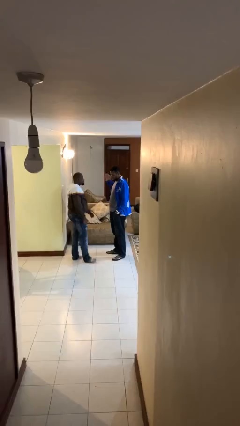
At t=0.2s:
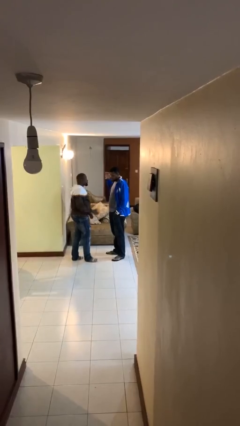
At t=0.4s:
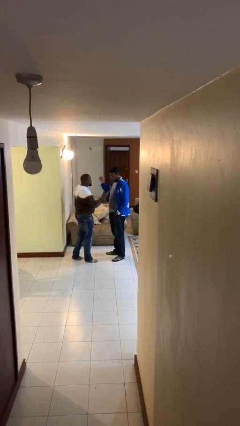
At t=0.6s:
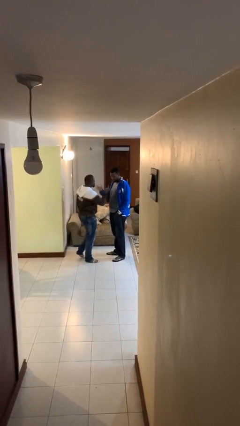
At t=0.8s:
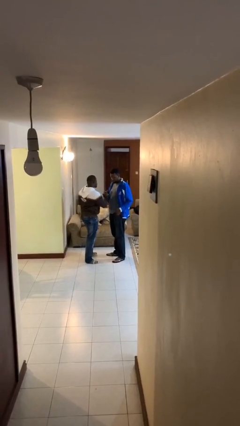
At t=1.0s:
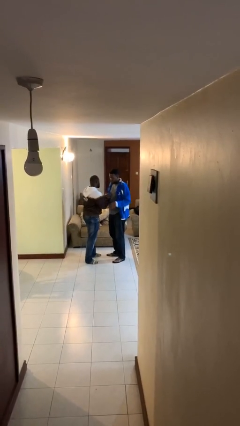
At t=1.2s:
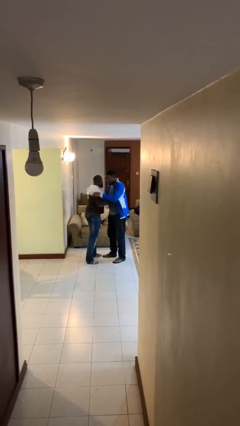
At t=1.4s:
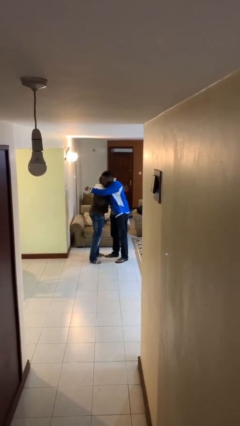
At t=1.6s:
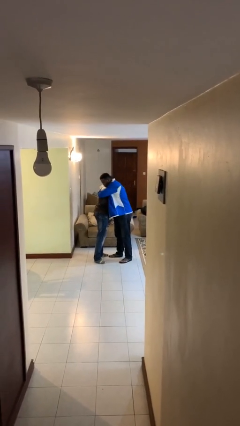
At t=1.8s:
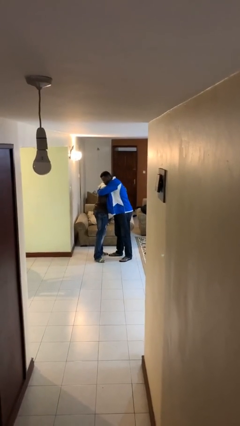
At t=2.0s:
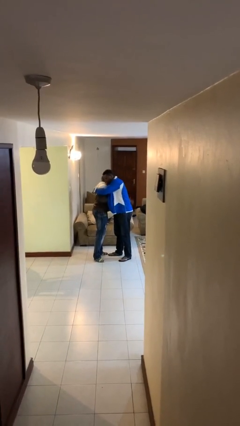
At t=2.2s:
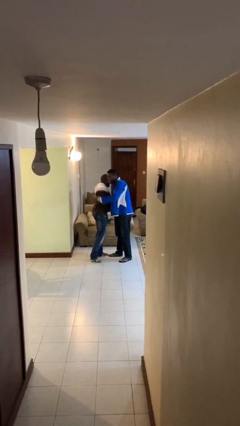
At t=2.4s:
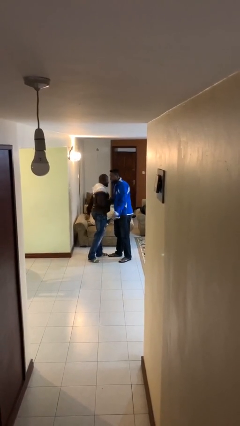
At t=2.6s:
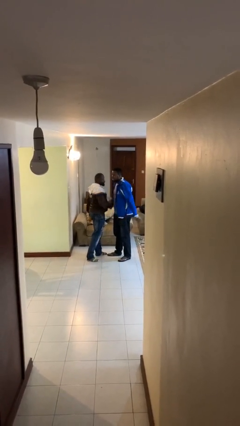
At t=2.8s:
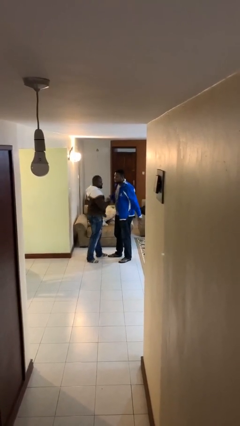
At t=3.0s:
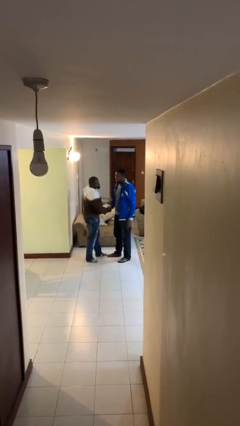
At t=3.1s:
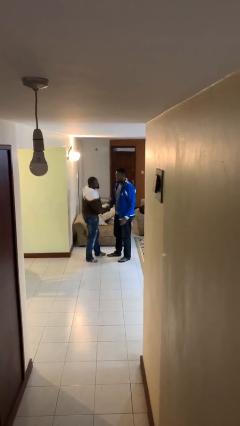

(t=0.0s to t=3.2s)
person embraces person

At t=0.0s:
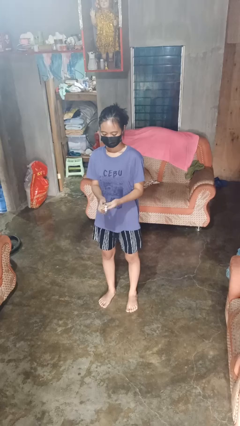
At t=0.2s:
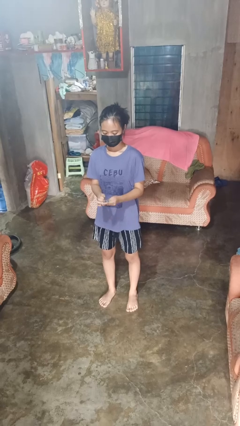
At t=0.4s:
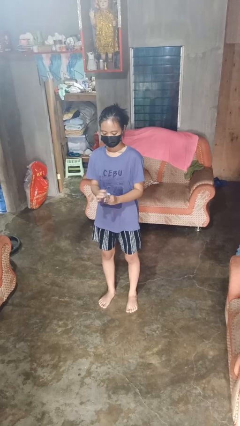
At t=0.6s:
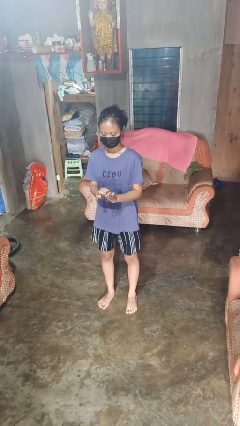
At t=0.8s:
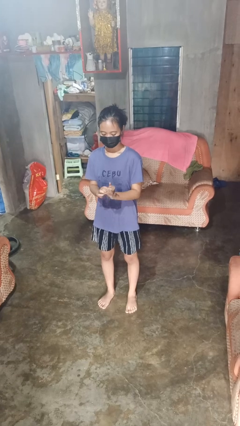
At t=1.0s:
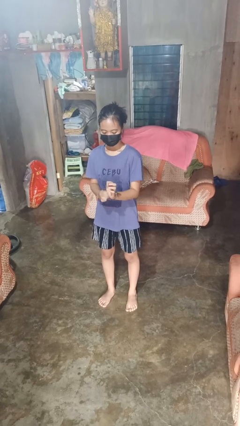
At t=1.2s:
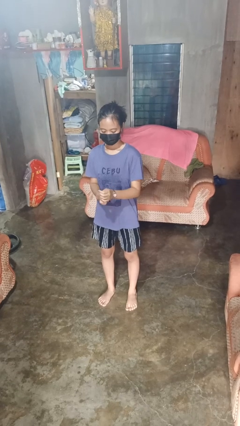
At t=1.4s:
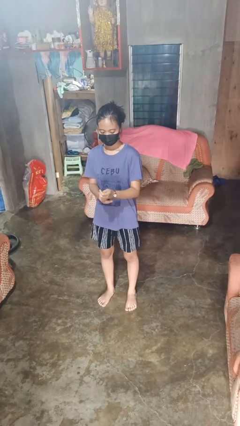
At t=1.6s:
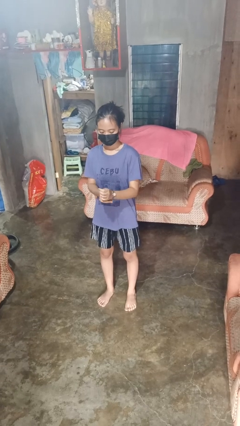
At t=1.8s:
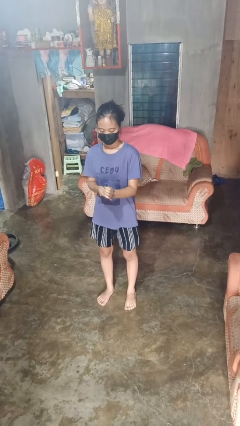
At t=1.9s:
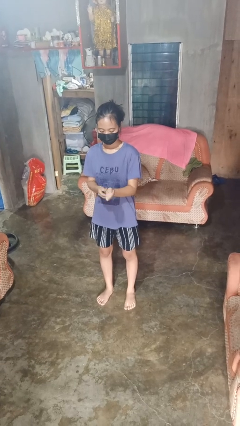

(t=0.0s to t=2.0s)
person puts on wristwatch

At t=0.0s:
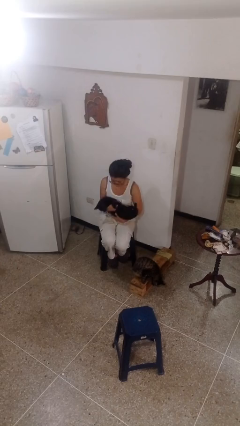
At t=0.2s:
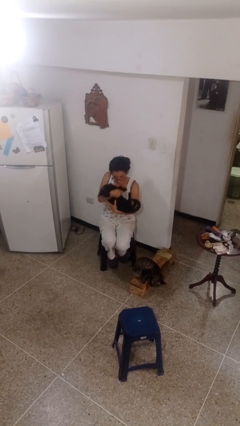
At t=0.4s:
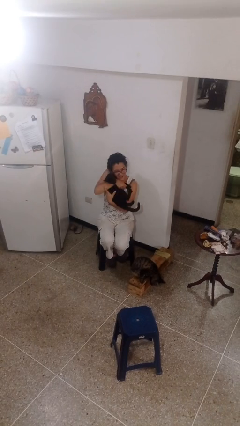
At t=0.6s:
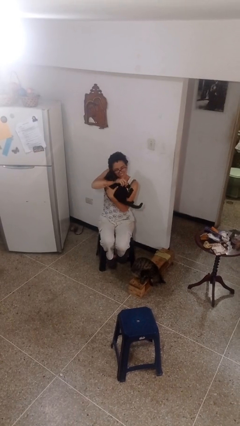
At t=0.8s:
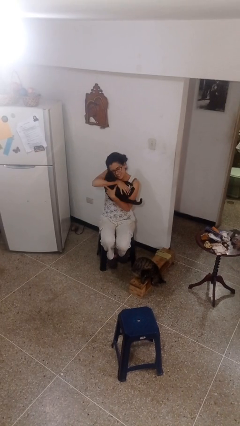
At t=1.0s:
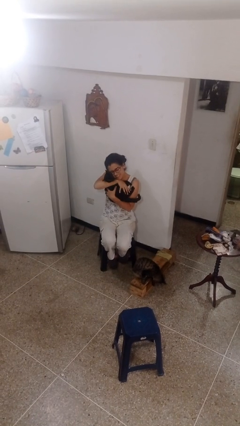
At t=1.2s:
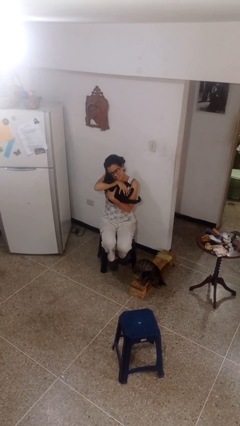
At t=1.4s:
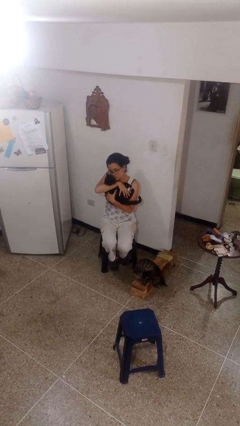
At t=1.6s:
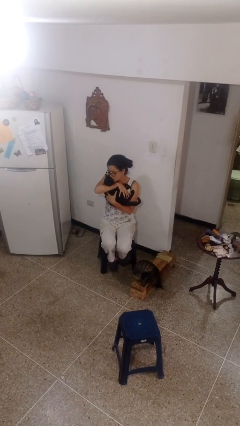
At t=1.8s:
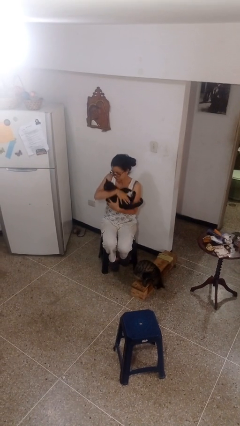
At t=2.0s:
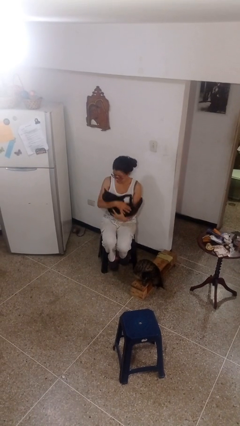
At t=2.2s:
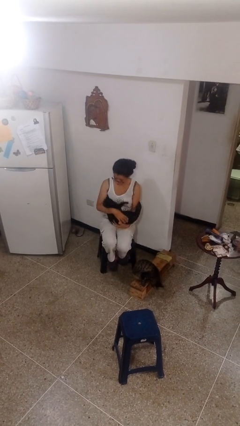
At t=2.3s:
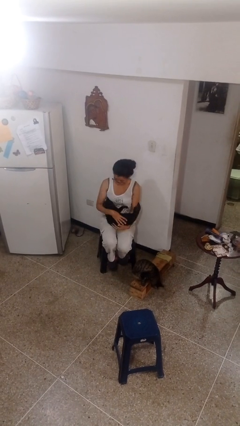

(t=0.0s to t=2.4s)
person hugs cat

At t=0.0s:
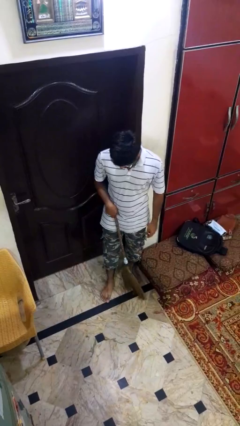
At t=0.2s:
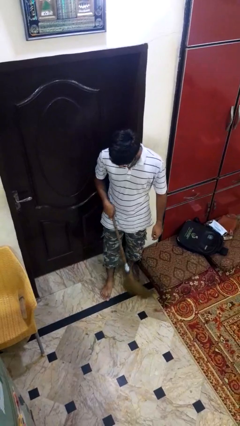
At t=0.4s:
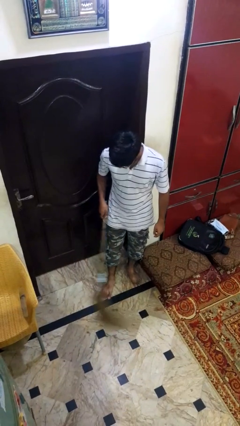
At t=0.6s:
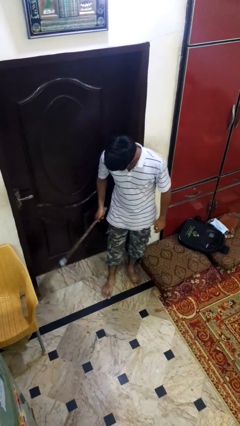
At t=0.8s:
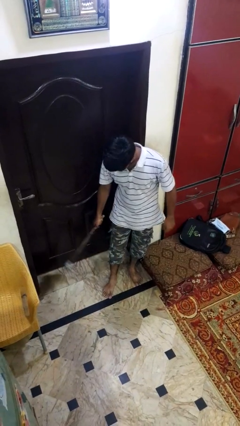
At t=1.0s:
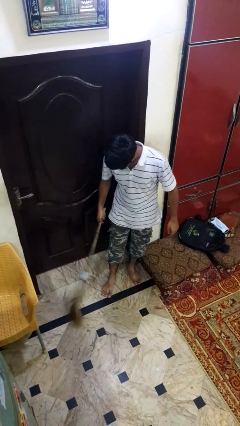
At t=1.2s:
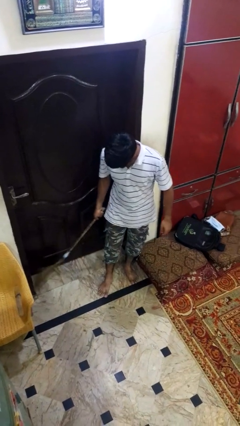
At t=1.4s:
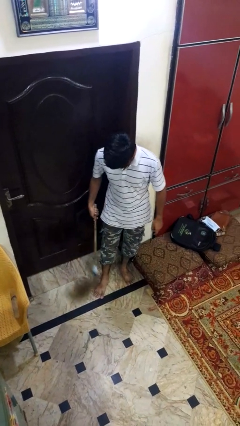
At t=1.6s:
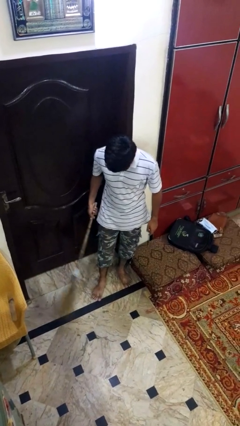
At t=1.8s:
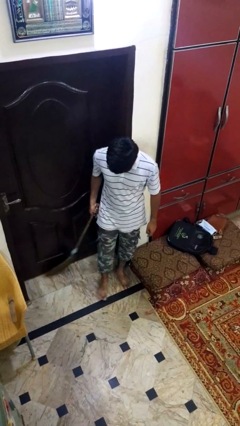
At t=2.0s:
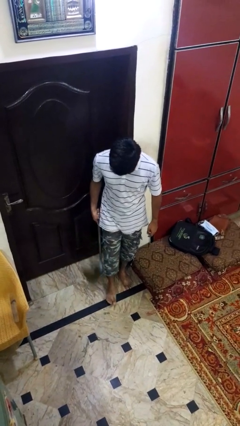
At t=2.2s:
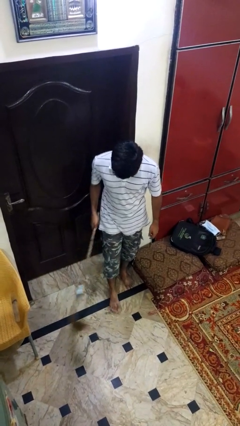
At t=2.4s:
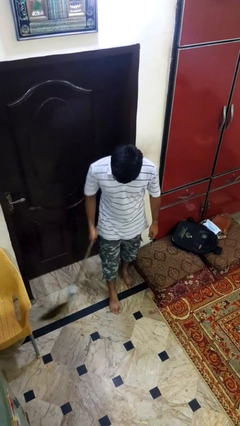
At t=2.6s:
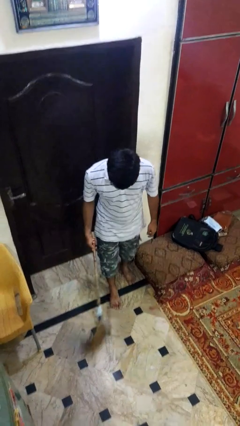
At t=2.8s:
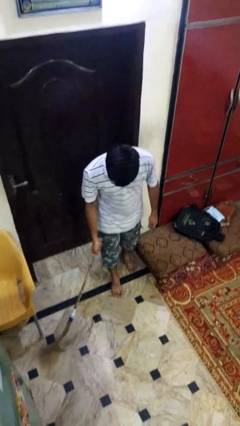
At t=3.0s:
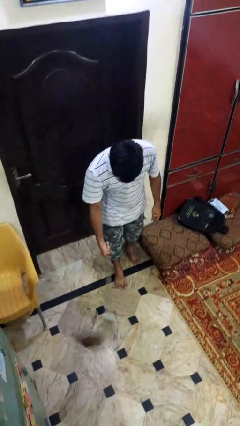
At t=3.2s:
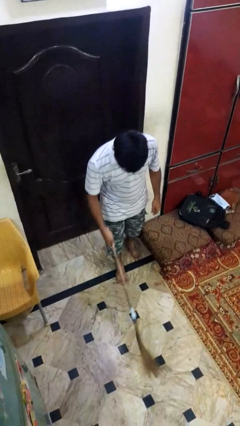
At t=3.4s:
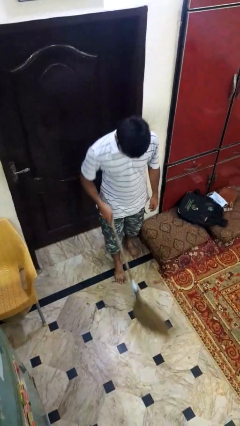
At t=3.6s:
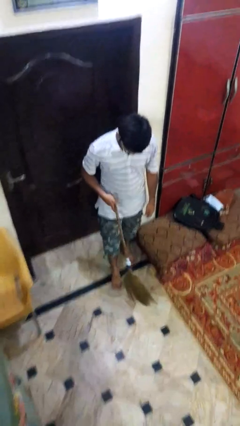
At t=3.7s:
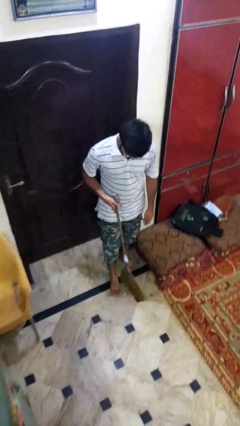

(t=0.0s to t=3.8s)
person sweeps floor

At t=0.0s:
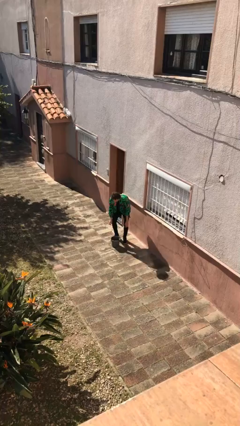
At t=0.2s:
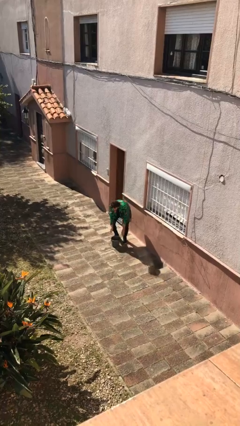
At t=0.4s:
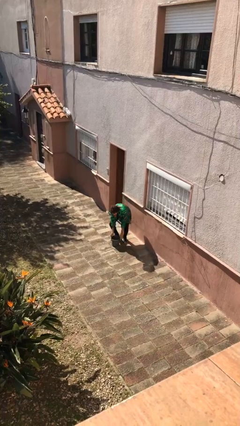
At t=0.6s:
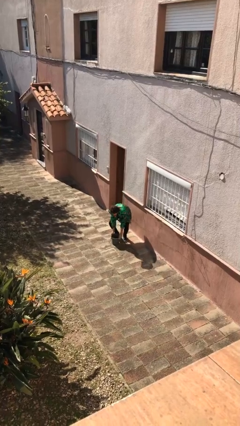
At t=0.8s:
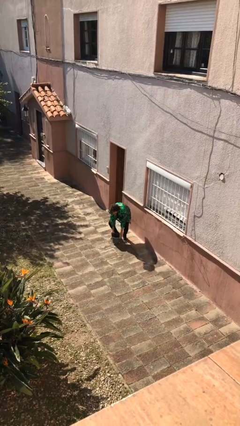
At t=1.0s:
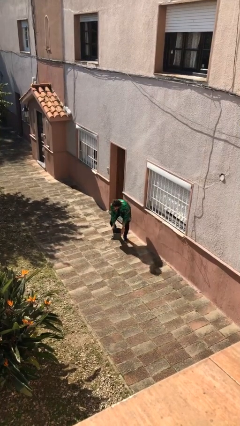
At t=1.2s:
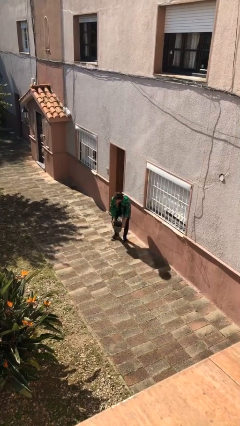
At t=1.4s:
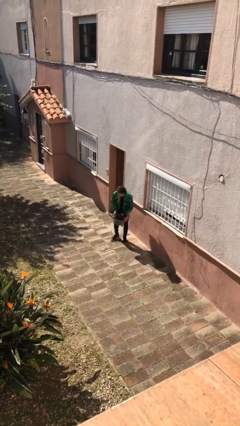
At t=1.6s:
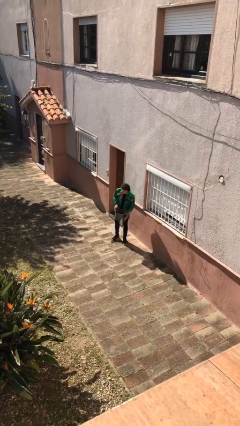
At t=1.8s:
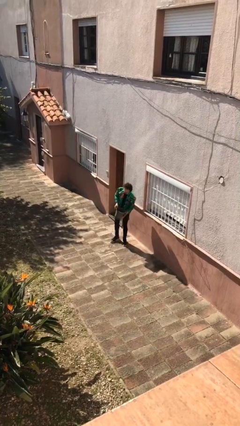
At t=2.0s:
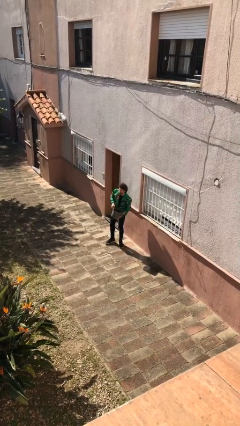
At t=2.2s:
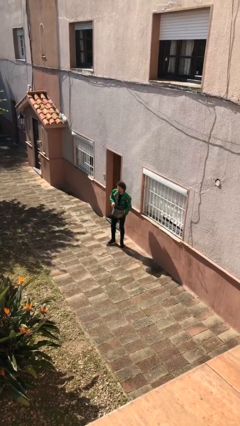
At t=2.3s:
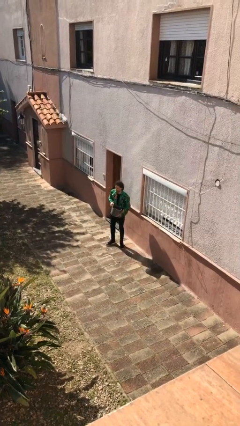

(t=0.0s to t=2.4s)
person picks up object from floor

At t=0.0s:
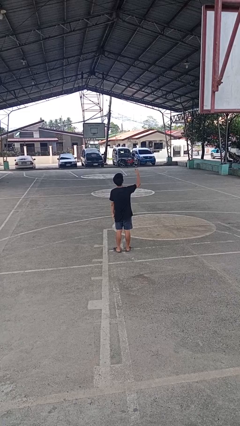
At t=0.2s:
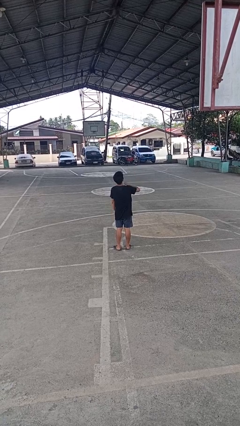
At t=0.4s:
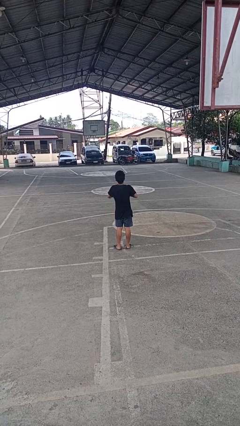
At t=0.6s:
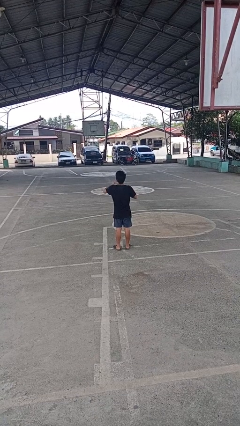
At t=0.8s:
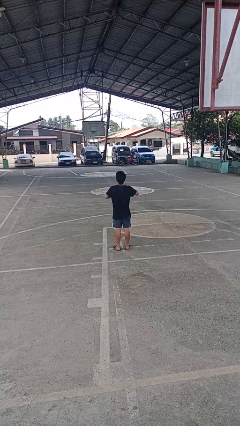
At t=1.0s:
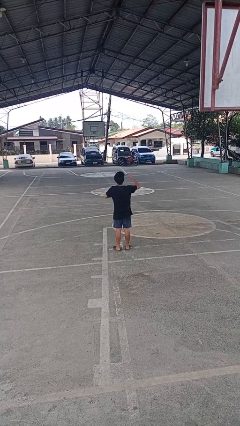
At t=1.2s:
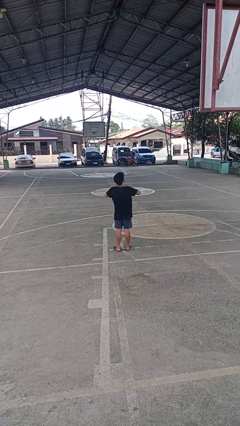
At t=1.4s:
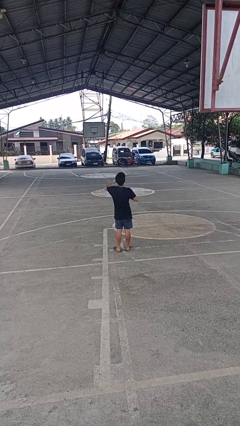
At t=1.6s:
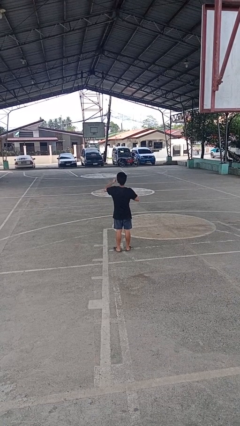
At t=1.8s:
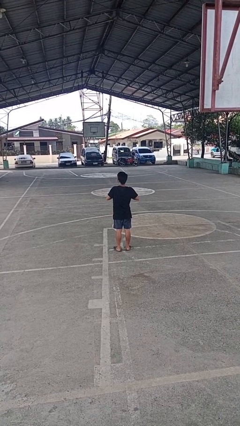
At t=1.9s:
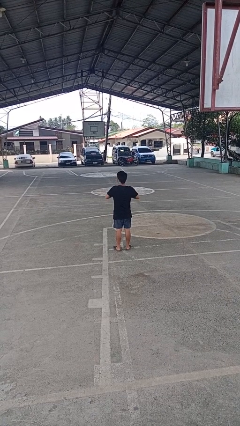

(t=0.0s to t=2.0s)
person drums on chest

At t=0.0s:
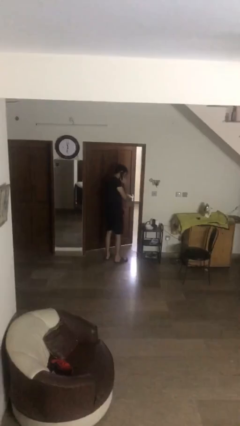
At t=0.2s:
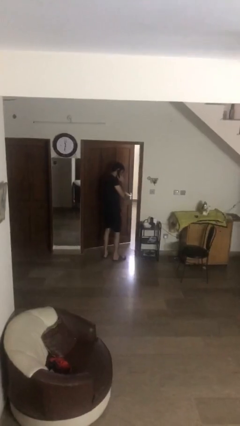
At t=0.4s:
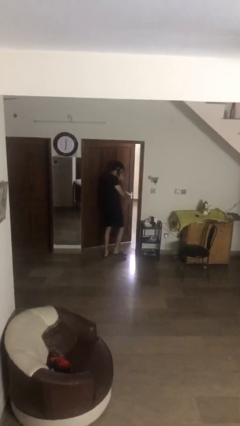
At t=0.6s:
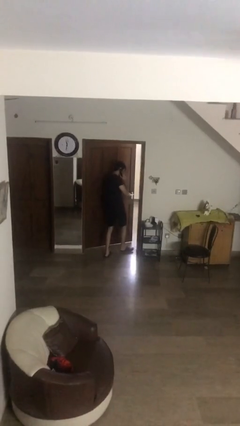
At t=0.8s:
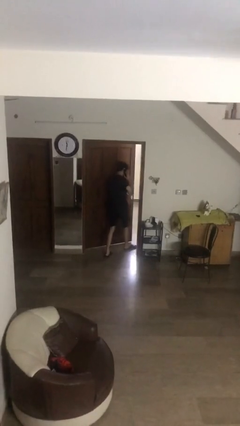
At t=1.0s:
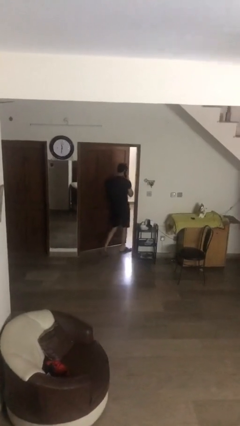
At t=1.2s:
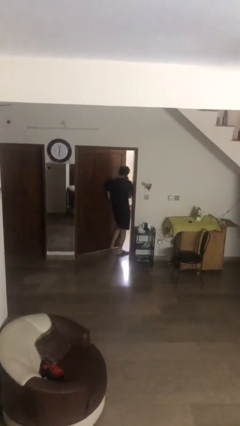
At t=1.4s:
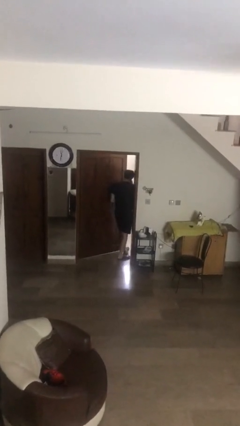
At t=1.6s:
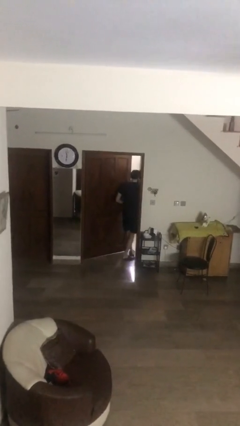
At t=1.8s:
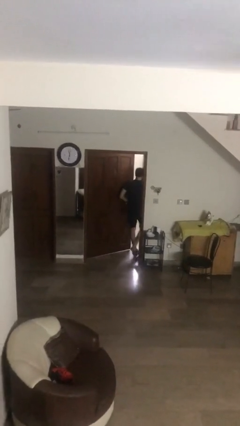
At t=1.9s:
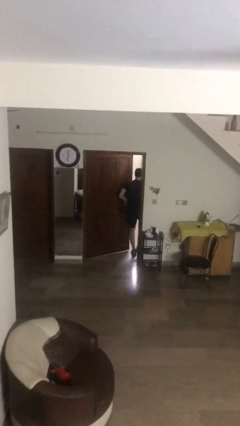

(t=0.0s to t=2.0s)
person exits scene through structure
